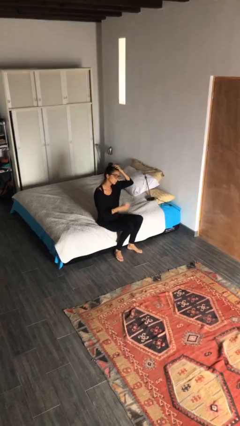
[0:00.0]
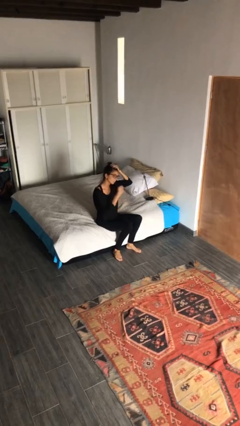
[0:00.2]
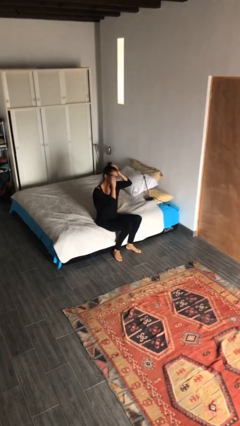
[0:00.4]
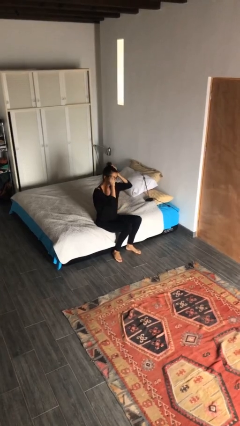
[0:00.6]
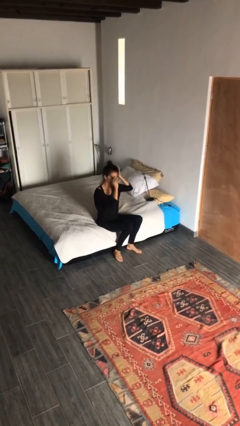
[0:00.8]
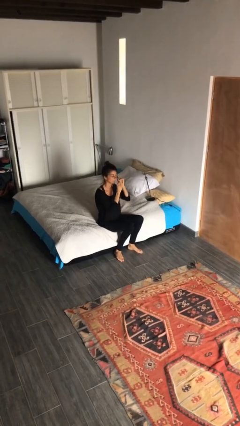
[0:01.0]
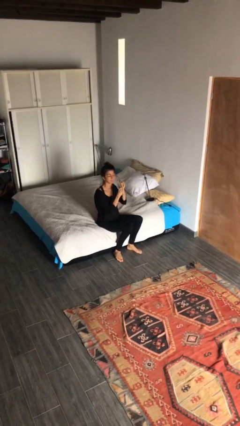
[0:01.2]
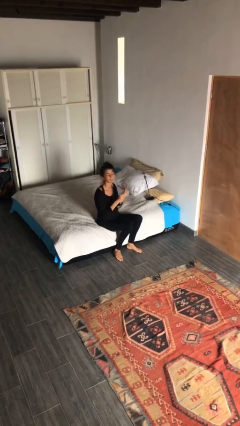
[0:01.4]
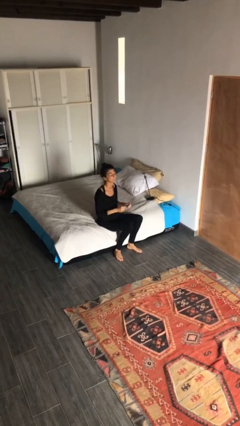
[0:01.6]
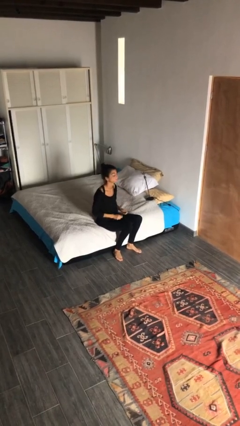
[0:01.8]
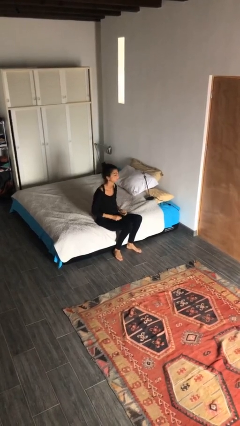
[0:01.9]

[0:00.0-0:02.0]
person takes off glasses

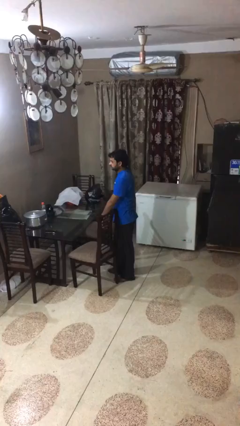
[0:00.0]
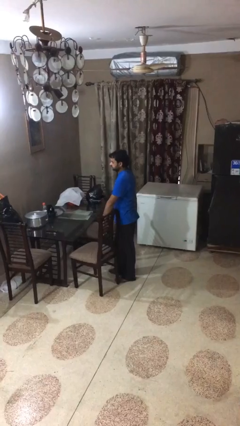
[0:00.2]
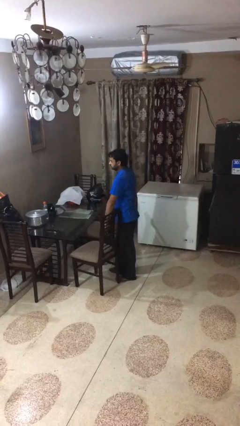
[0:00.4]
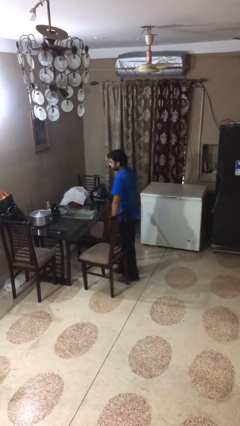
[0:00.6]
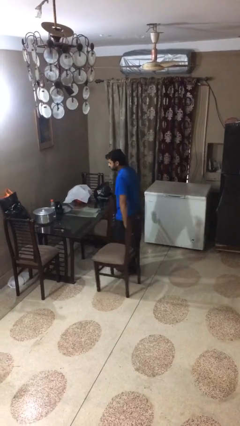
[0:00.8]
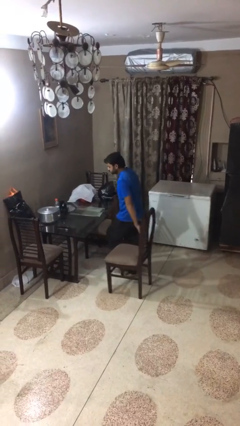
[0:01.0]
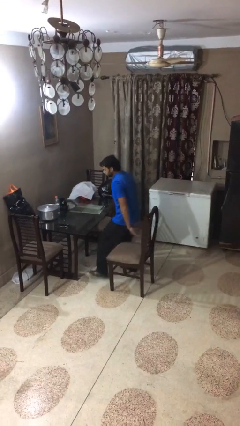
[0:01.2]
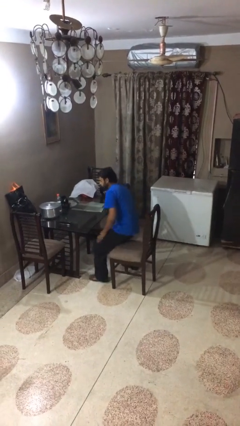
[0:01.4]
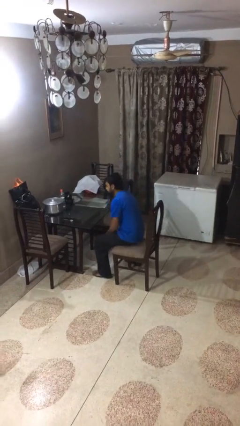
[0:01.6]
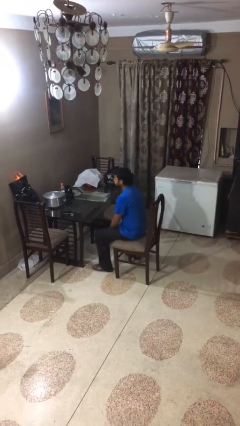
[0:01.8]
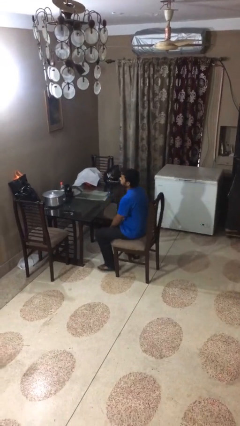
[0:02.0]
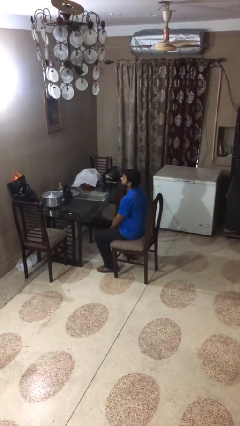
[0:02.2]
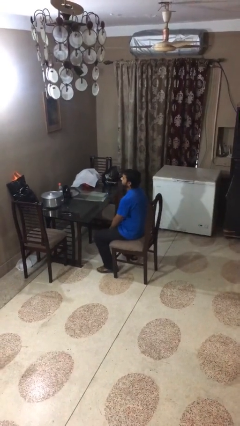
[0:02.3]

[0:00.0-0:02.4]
person sits down

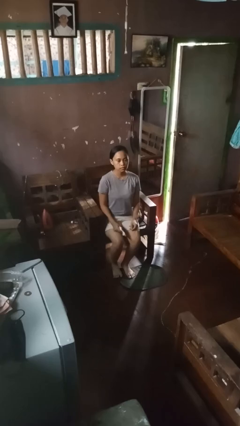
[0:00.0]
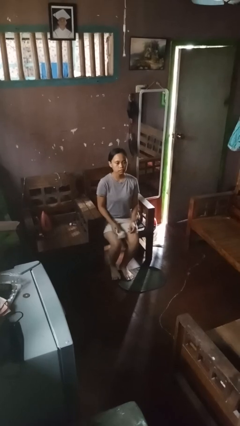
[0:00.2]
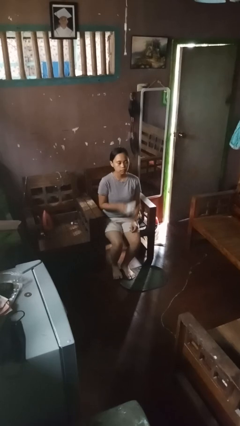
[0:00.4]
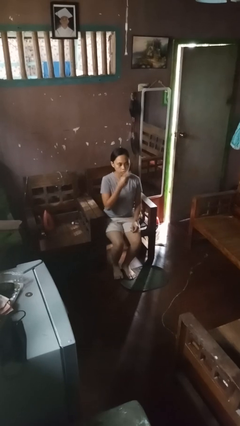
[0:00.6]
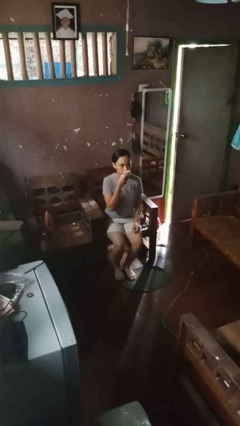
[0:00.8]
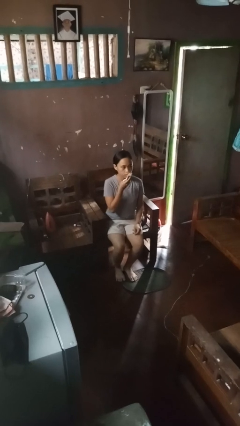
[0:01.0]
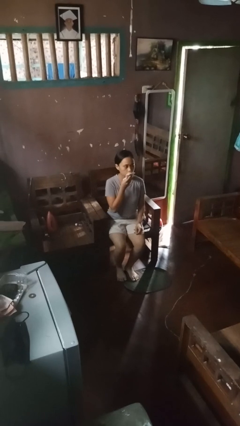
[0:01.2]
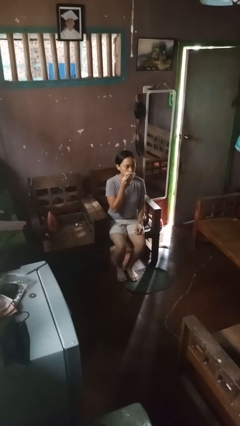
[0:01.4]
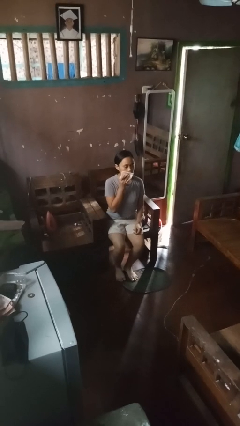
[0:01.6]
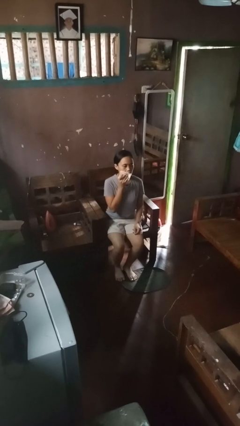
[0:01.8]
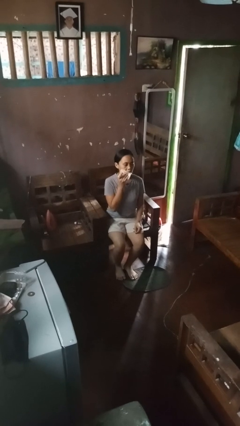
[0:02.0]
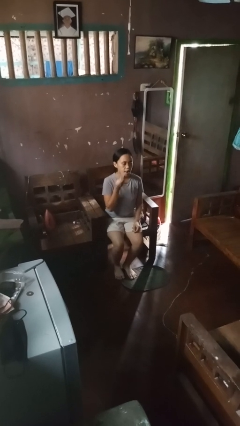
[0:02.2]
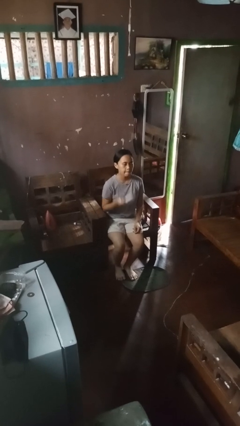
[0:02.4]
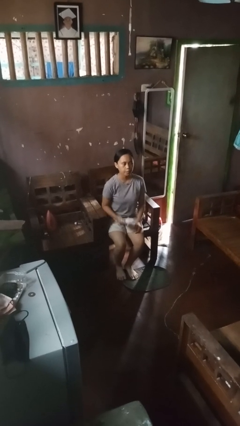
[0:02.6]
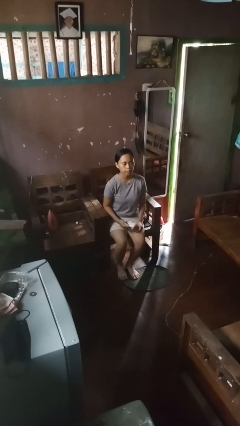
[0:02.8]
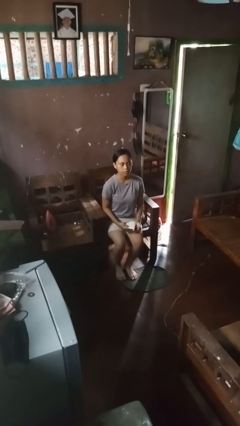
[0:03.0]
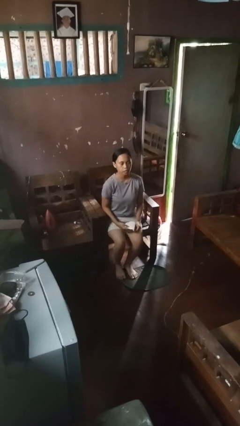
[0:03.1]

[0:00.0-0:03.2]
person wipes mouth with napkin

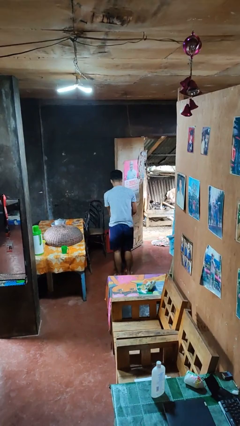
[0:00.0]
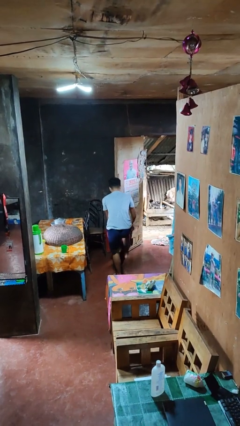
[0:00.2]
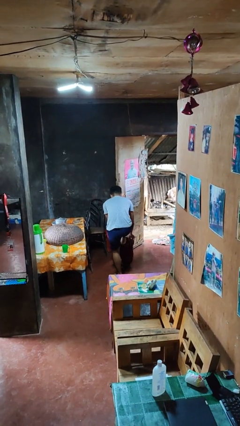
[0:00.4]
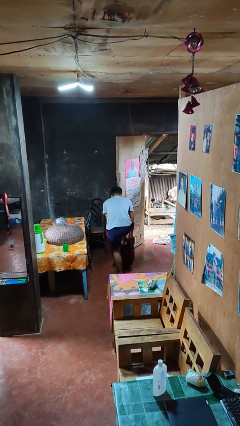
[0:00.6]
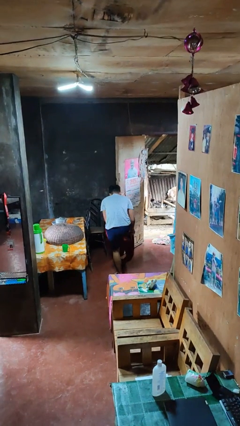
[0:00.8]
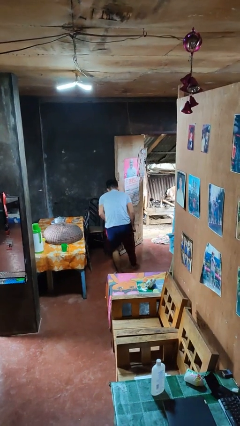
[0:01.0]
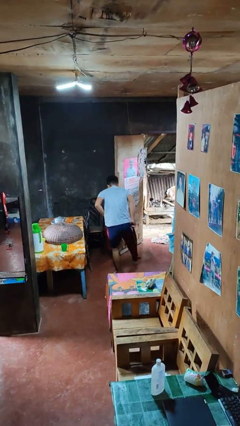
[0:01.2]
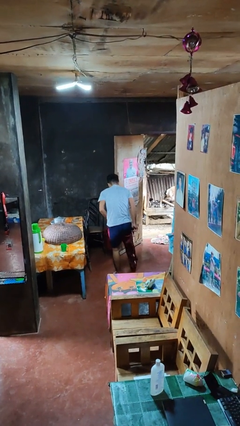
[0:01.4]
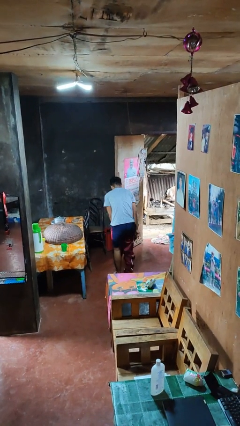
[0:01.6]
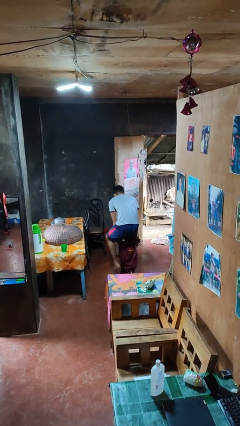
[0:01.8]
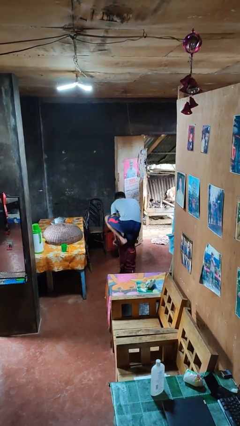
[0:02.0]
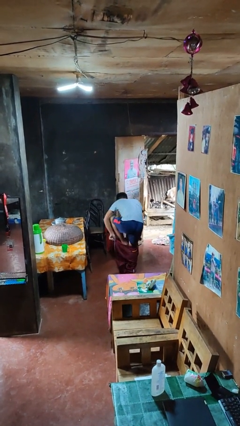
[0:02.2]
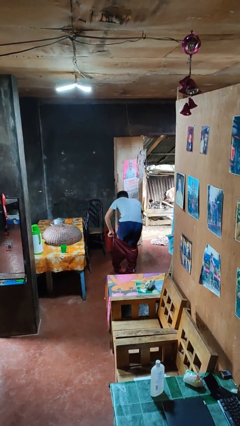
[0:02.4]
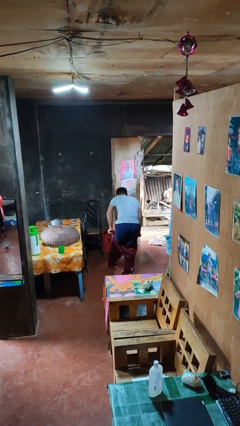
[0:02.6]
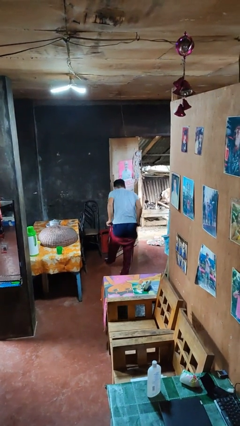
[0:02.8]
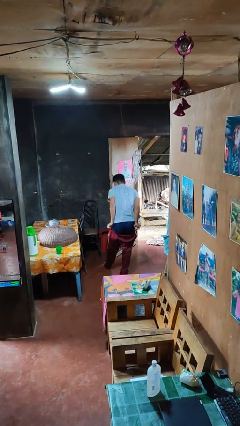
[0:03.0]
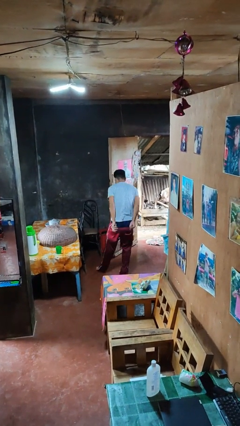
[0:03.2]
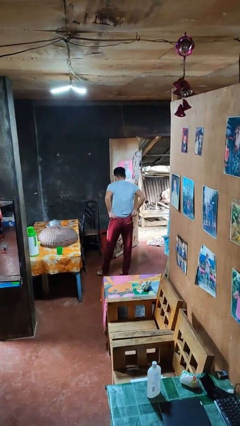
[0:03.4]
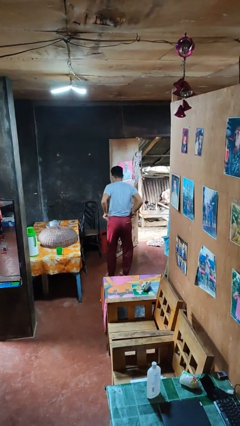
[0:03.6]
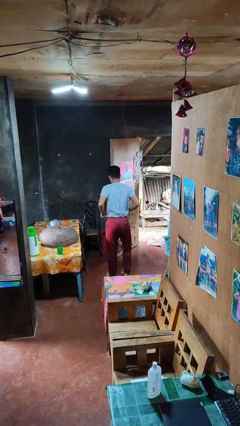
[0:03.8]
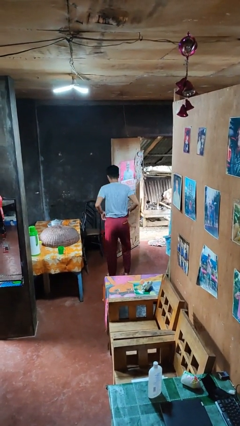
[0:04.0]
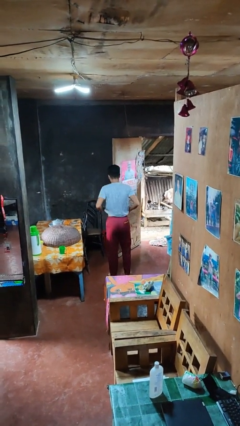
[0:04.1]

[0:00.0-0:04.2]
person puts on pants

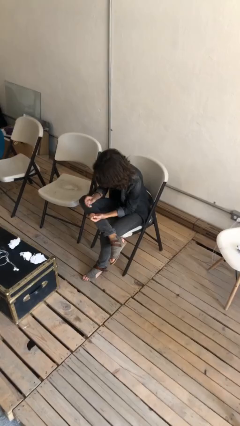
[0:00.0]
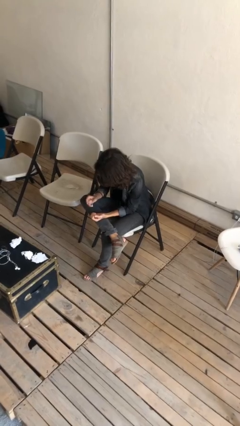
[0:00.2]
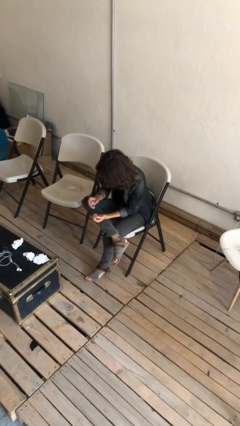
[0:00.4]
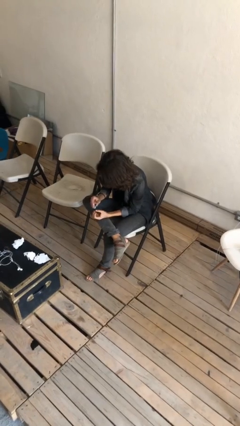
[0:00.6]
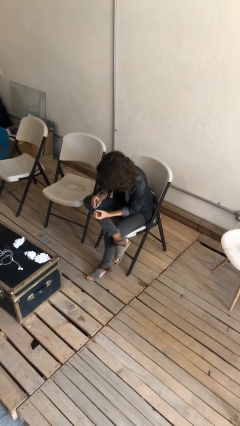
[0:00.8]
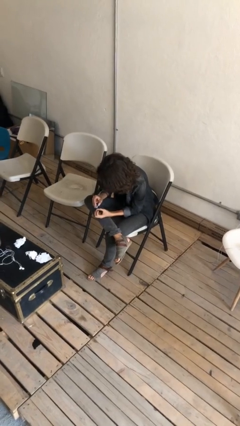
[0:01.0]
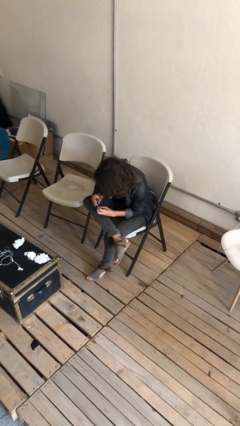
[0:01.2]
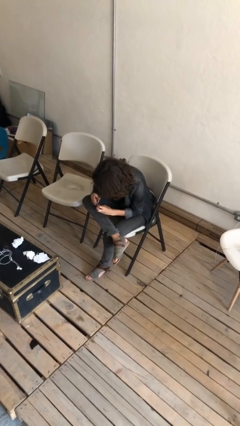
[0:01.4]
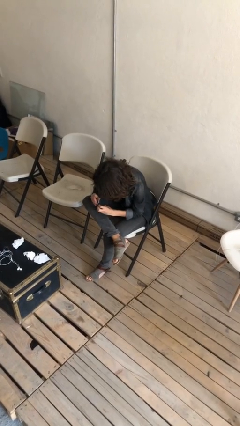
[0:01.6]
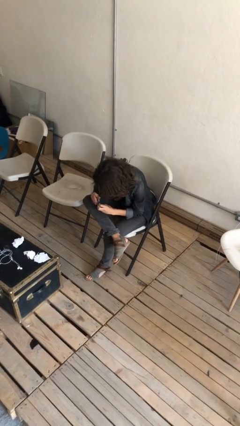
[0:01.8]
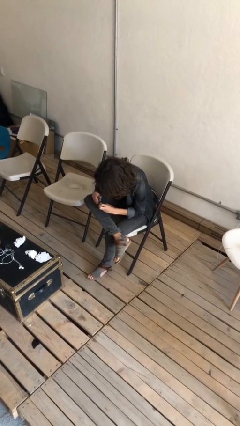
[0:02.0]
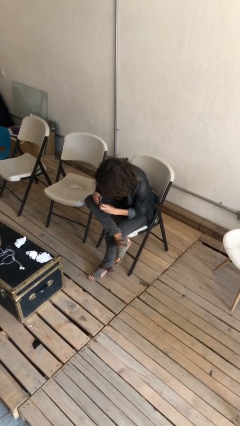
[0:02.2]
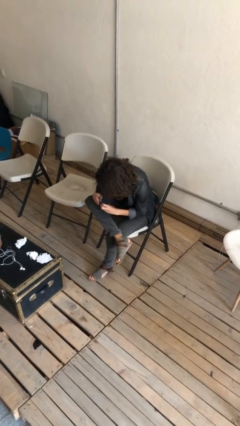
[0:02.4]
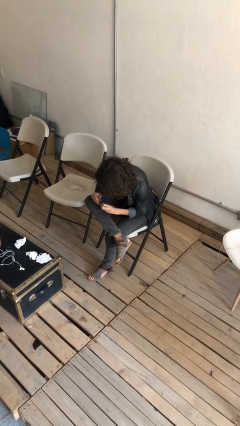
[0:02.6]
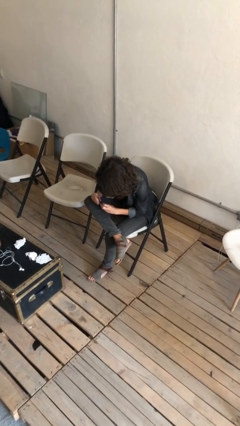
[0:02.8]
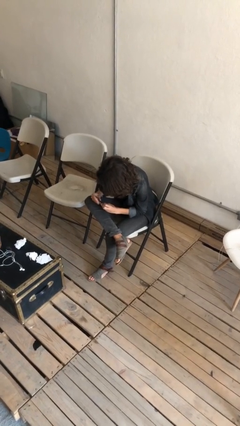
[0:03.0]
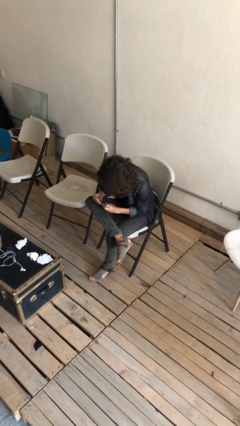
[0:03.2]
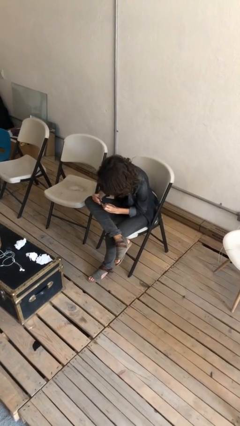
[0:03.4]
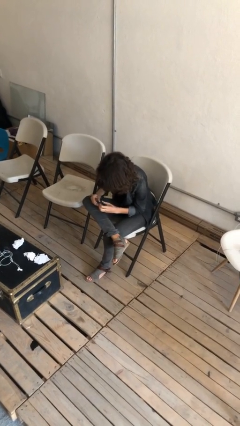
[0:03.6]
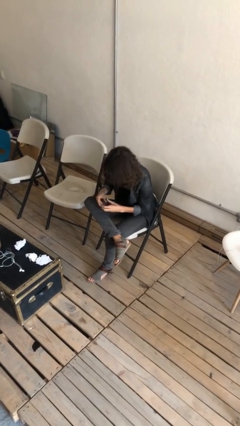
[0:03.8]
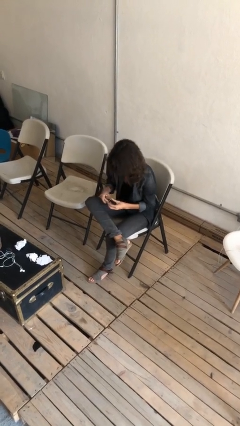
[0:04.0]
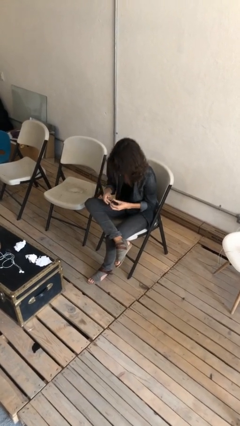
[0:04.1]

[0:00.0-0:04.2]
person clips fingernails

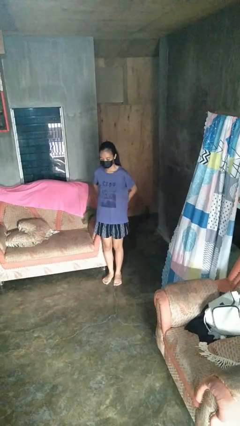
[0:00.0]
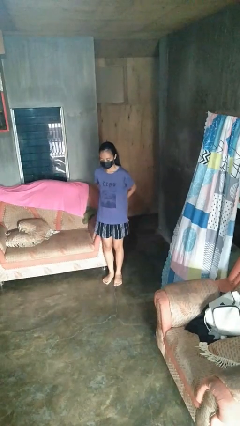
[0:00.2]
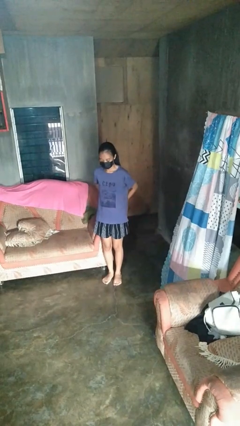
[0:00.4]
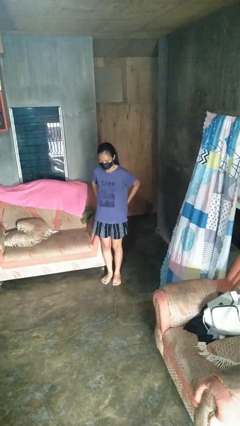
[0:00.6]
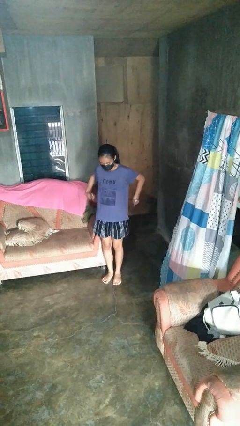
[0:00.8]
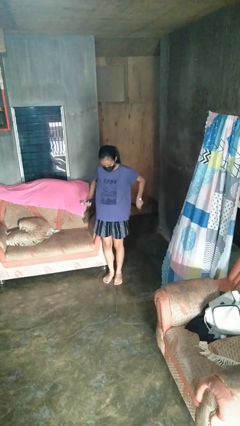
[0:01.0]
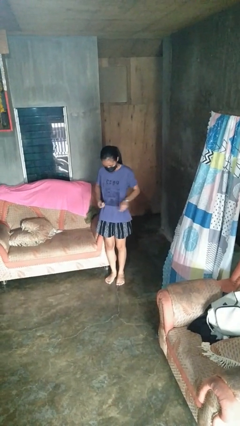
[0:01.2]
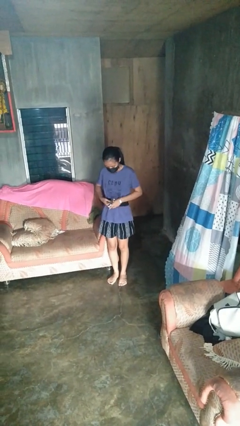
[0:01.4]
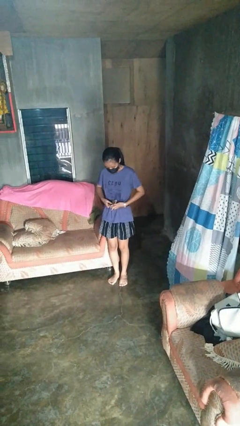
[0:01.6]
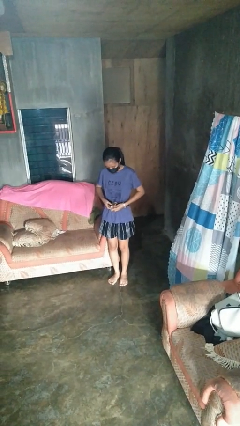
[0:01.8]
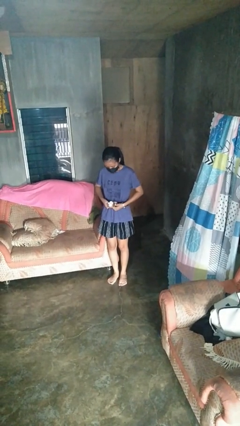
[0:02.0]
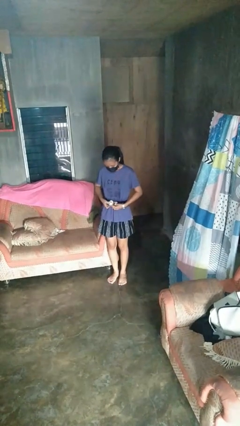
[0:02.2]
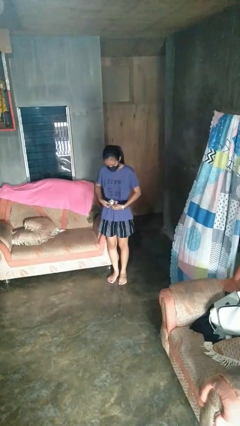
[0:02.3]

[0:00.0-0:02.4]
person puts on belt
